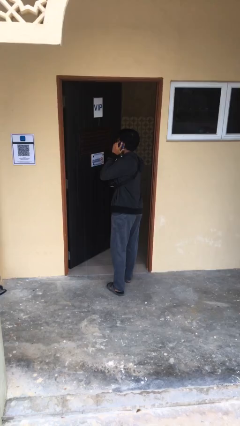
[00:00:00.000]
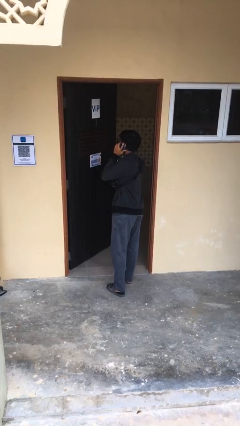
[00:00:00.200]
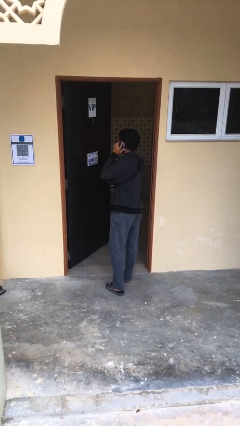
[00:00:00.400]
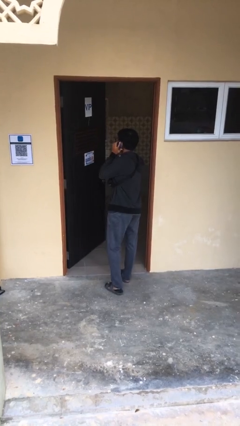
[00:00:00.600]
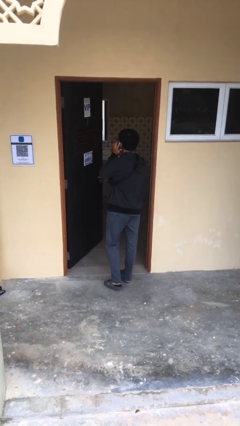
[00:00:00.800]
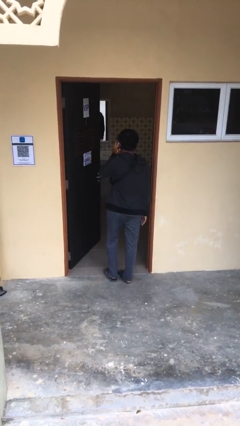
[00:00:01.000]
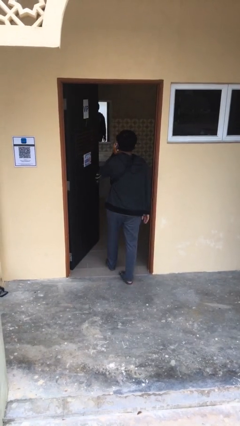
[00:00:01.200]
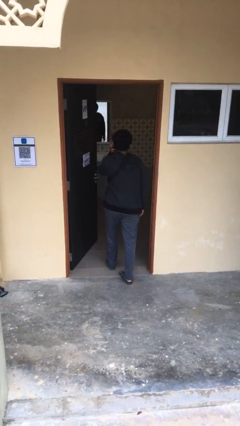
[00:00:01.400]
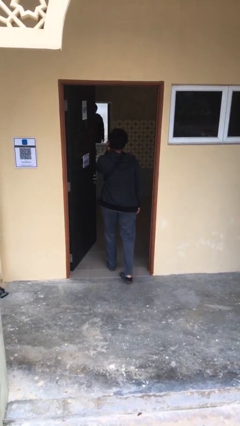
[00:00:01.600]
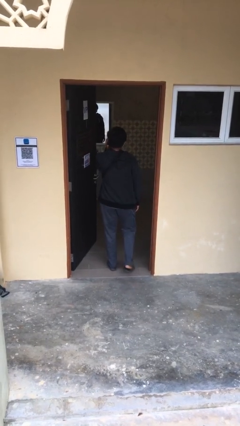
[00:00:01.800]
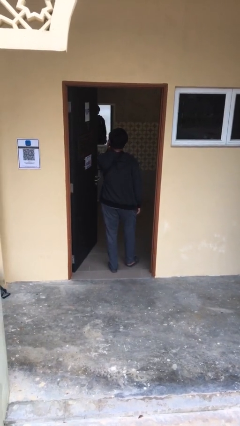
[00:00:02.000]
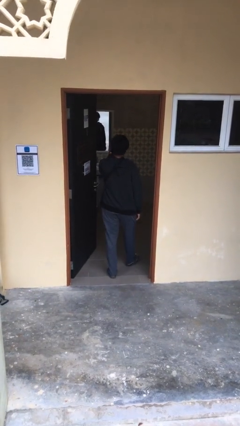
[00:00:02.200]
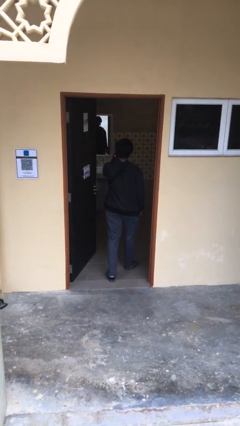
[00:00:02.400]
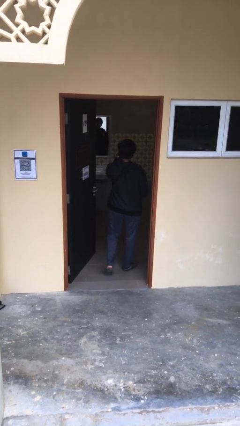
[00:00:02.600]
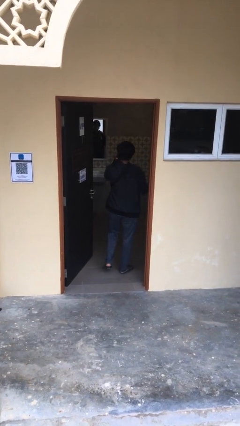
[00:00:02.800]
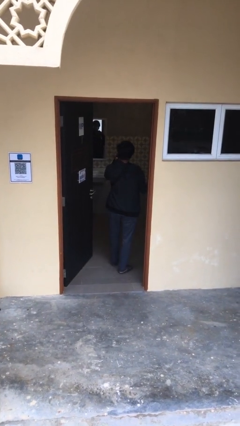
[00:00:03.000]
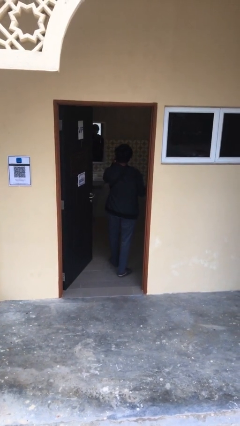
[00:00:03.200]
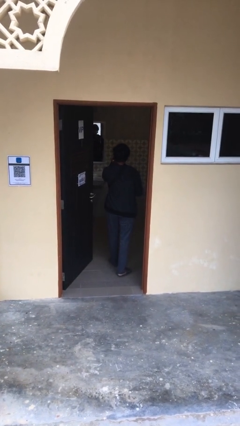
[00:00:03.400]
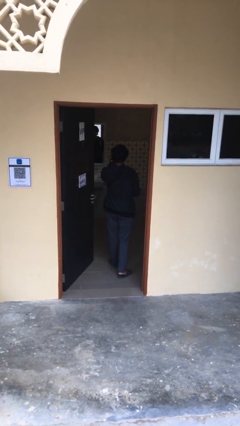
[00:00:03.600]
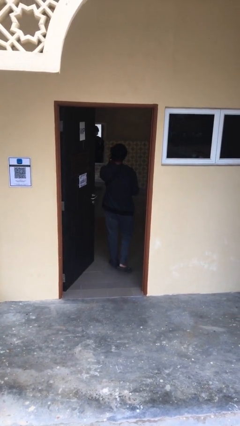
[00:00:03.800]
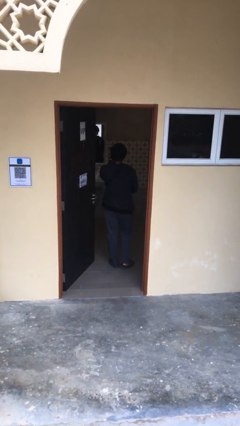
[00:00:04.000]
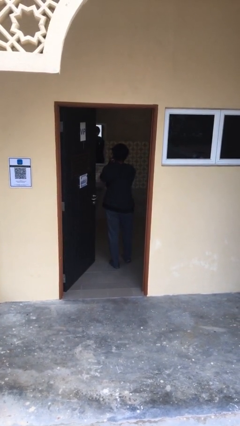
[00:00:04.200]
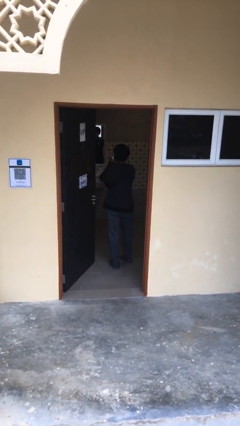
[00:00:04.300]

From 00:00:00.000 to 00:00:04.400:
person exits scene through structure

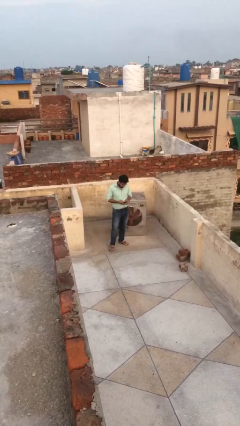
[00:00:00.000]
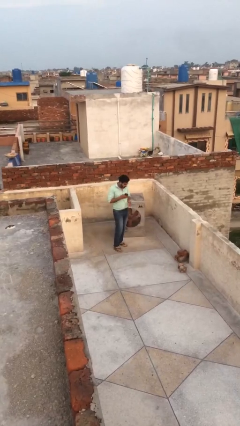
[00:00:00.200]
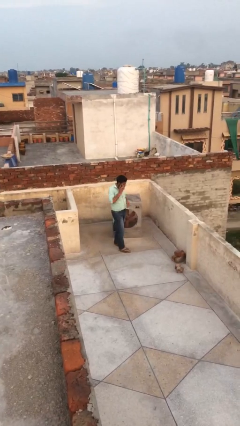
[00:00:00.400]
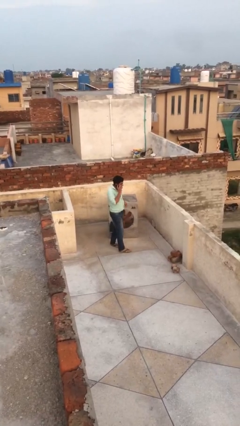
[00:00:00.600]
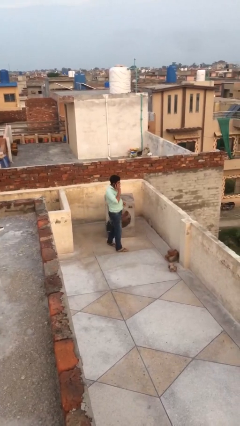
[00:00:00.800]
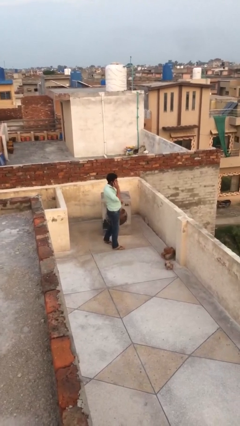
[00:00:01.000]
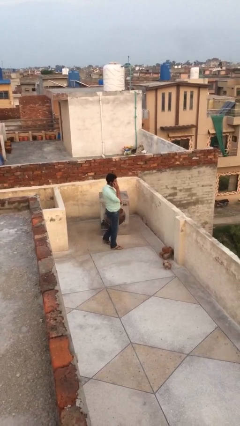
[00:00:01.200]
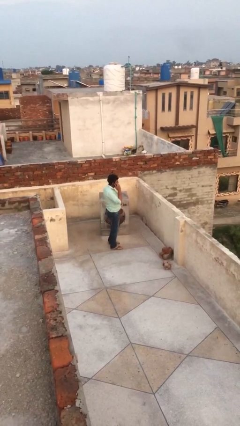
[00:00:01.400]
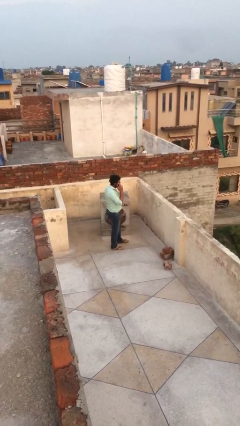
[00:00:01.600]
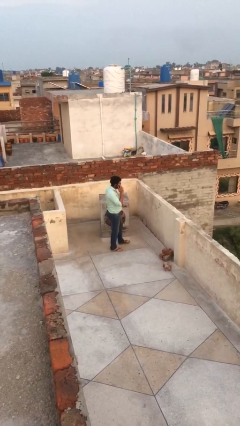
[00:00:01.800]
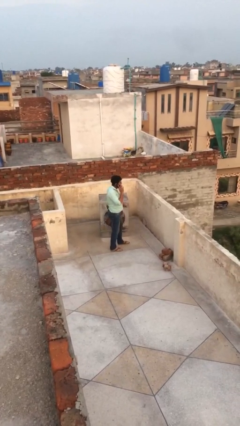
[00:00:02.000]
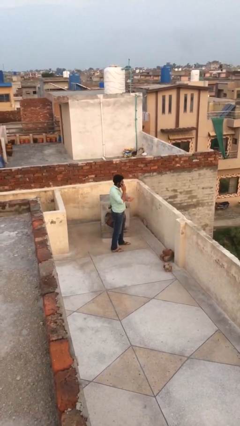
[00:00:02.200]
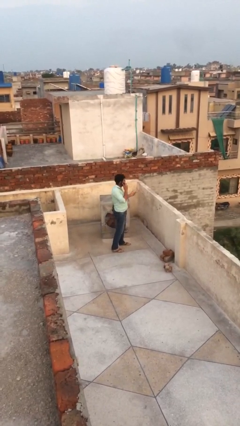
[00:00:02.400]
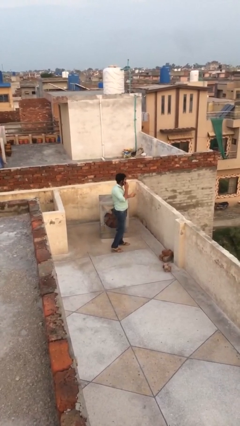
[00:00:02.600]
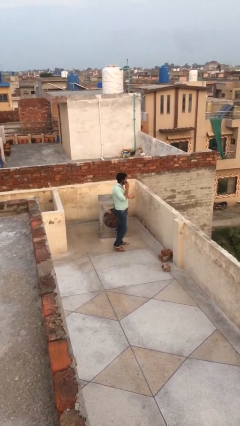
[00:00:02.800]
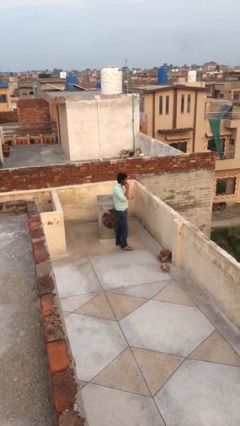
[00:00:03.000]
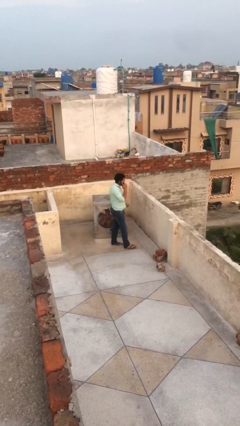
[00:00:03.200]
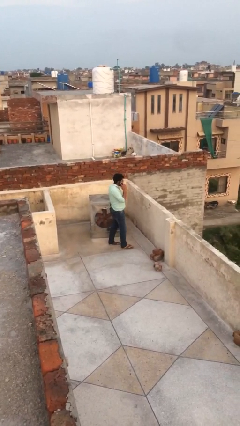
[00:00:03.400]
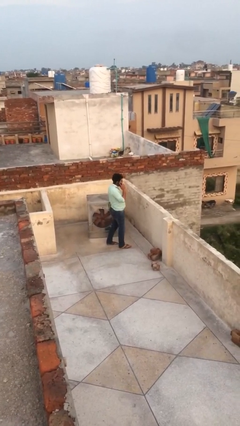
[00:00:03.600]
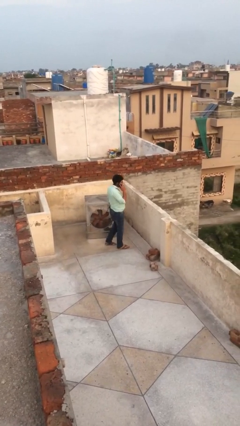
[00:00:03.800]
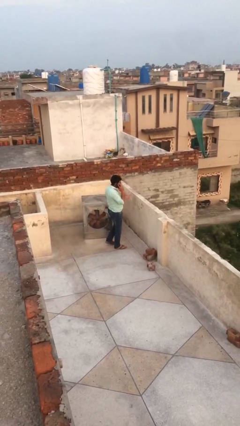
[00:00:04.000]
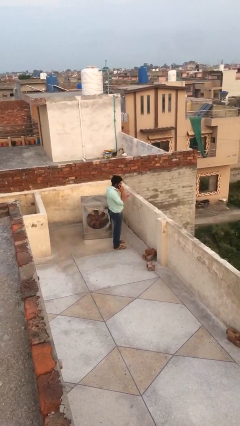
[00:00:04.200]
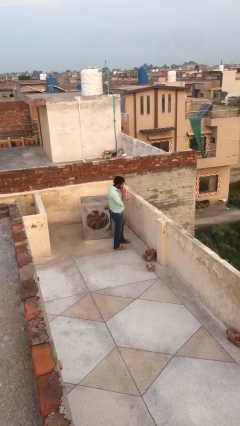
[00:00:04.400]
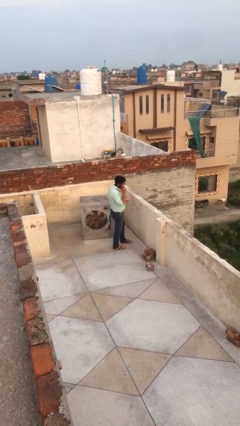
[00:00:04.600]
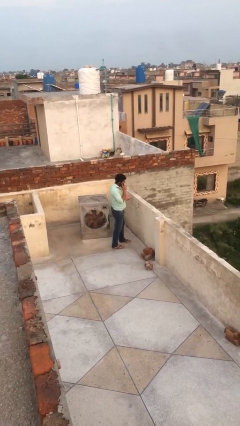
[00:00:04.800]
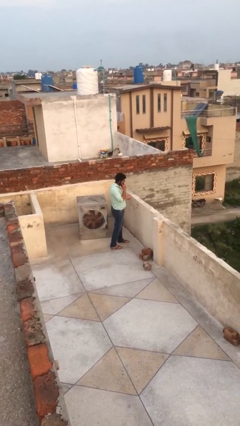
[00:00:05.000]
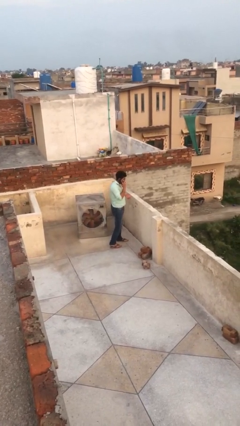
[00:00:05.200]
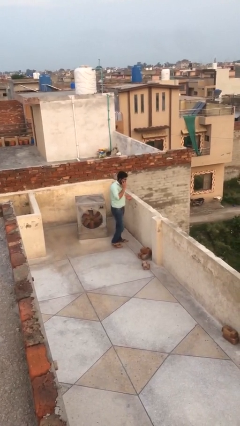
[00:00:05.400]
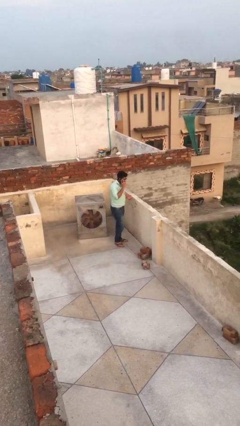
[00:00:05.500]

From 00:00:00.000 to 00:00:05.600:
person talks on phone

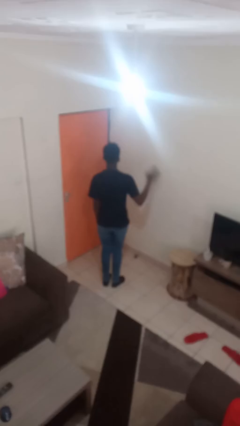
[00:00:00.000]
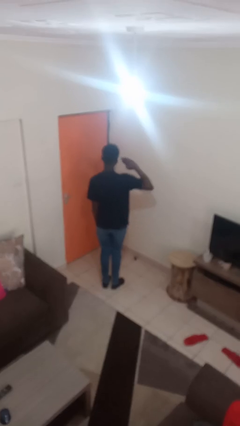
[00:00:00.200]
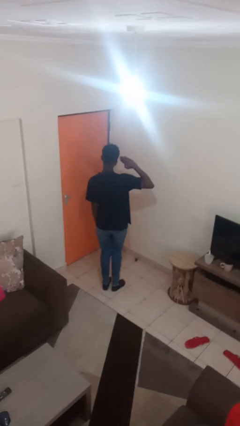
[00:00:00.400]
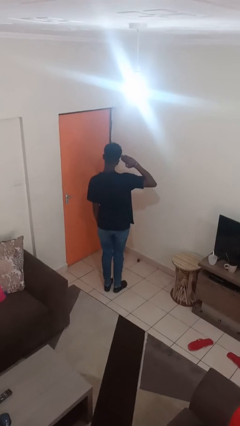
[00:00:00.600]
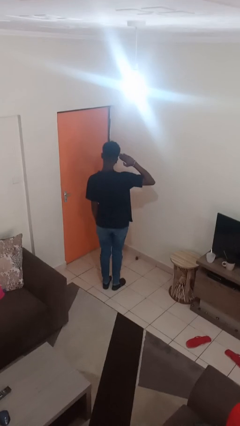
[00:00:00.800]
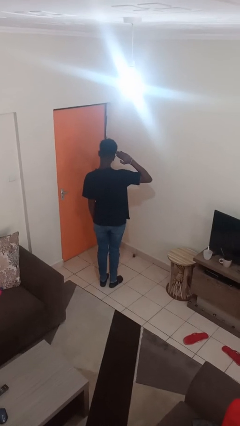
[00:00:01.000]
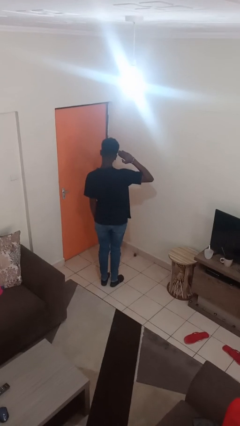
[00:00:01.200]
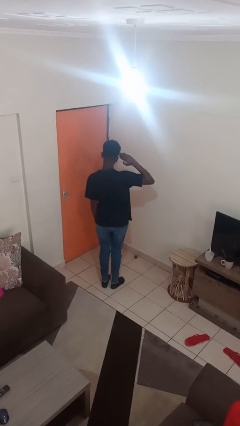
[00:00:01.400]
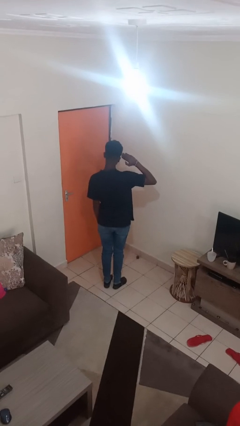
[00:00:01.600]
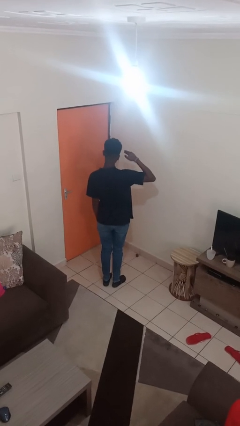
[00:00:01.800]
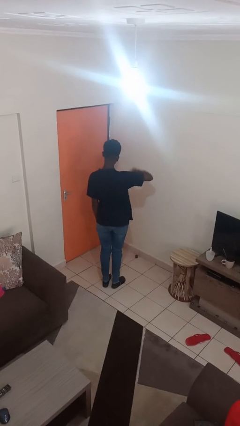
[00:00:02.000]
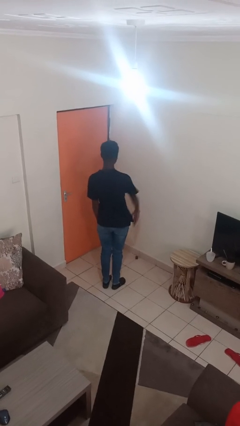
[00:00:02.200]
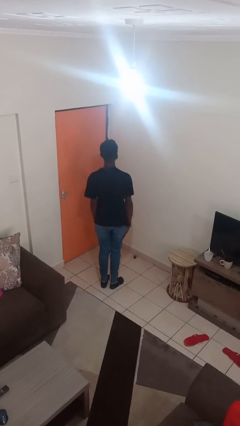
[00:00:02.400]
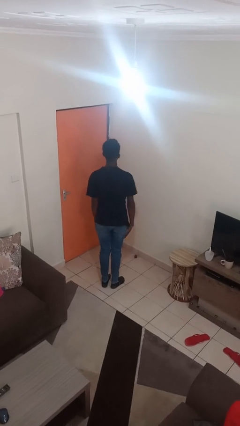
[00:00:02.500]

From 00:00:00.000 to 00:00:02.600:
person salutes

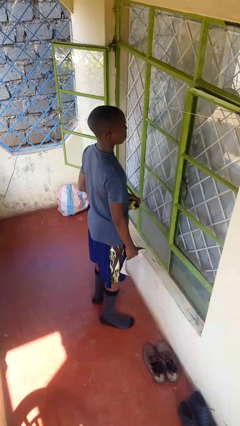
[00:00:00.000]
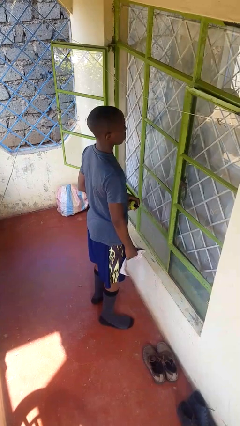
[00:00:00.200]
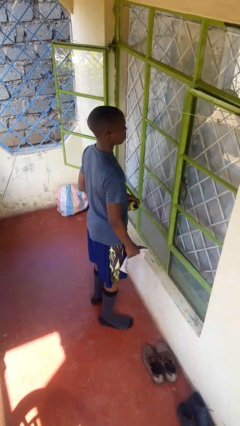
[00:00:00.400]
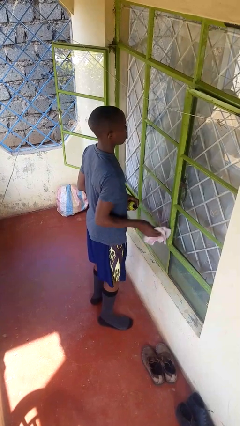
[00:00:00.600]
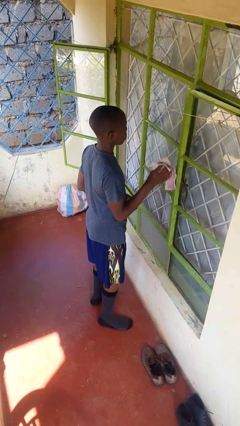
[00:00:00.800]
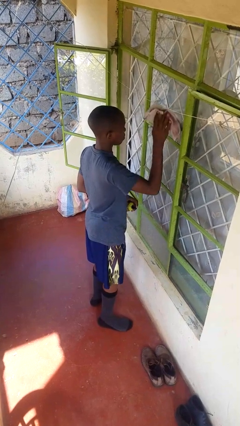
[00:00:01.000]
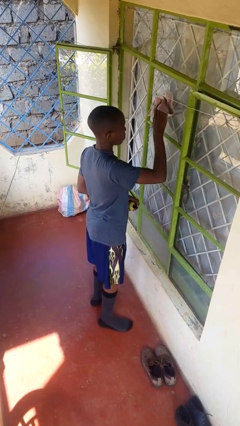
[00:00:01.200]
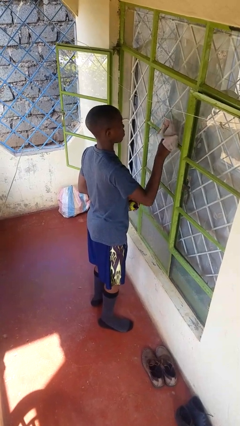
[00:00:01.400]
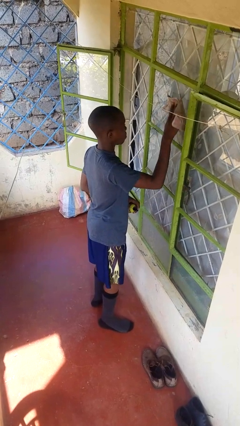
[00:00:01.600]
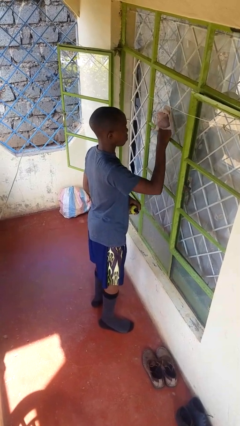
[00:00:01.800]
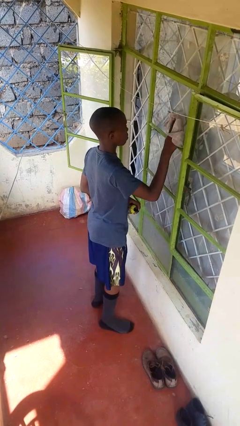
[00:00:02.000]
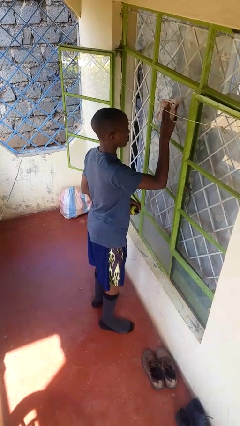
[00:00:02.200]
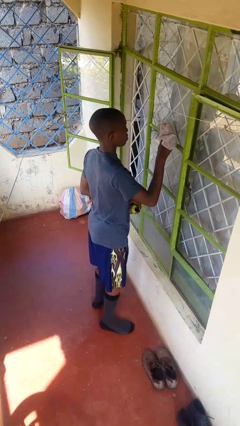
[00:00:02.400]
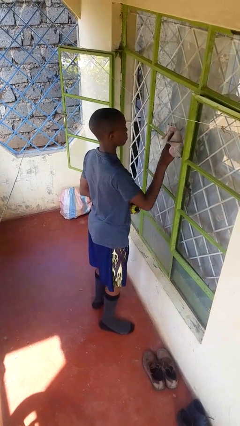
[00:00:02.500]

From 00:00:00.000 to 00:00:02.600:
person washes window

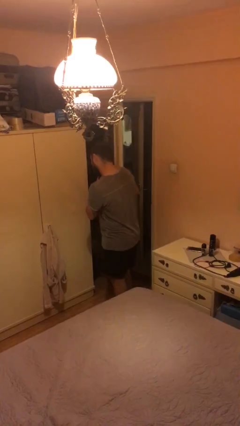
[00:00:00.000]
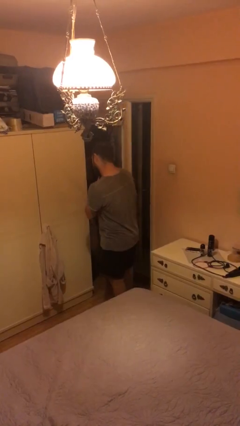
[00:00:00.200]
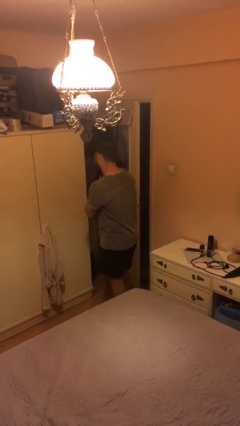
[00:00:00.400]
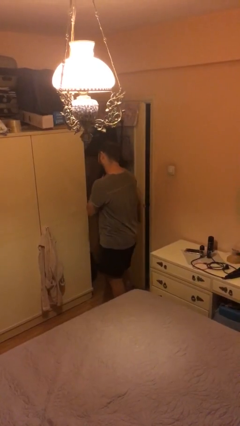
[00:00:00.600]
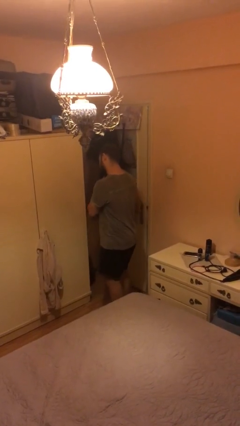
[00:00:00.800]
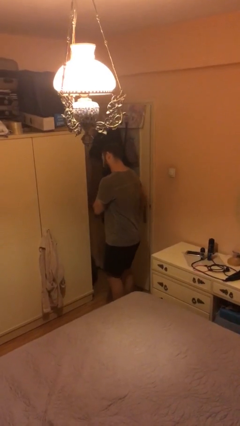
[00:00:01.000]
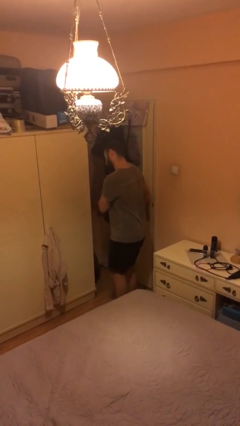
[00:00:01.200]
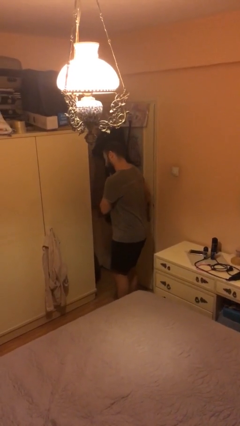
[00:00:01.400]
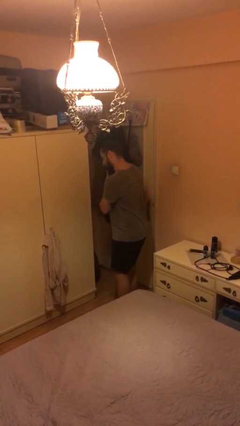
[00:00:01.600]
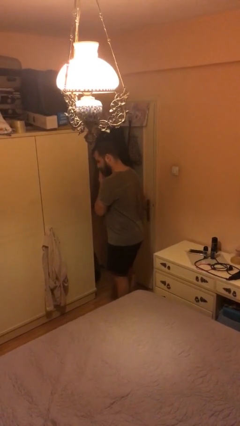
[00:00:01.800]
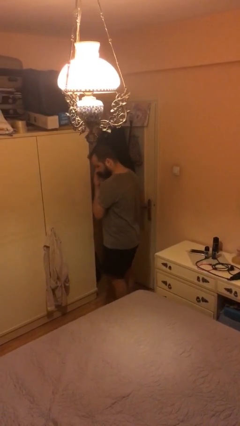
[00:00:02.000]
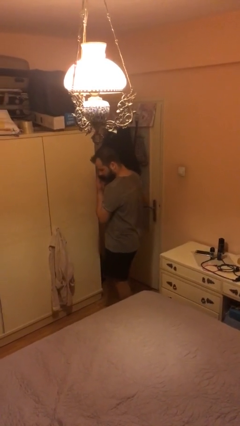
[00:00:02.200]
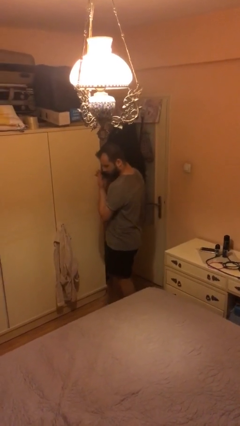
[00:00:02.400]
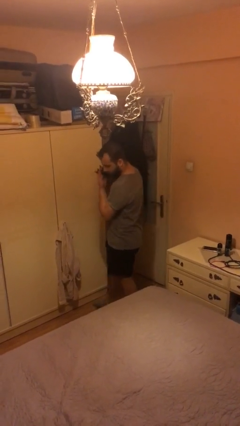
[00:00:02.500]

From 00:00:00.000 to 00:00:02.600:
person closes facility door
